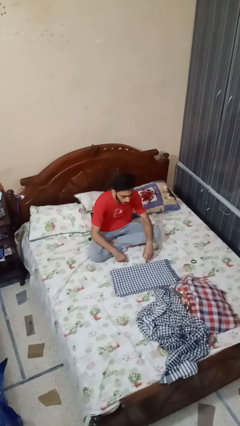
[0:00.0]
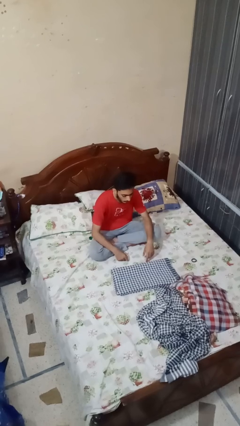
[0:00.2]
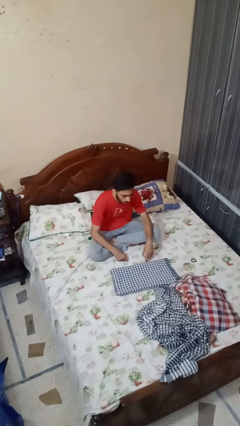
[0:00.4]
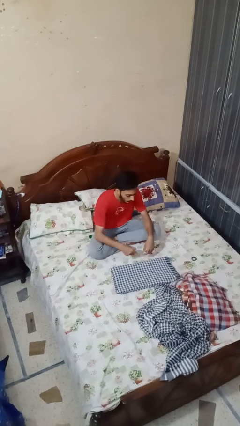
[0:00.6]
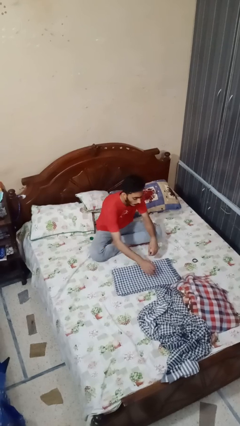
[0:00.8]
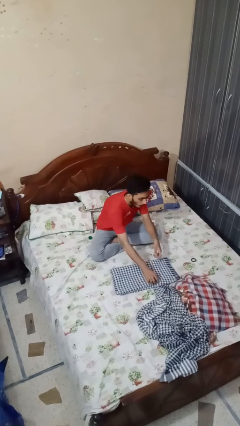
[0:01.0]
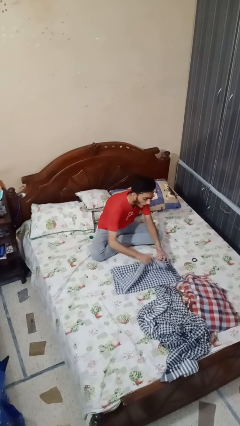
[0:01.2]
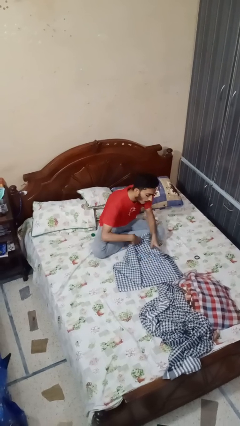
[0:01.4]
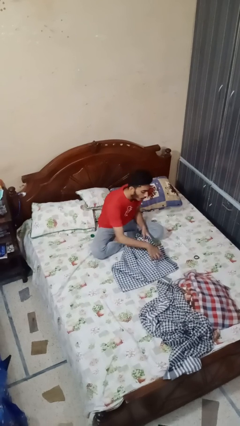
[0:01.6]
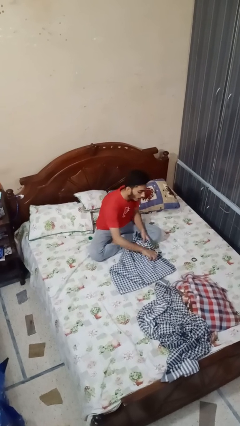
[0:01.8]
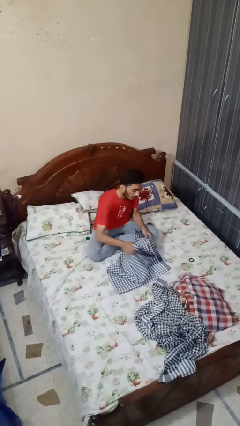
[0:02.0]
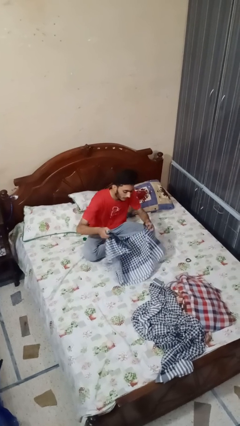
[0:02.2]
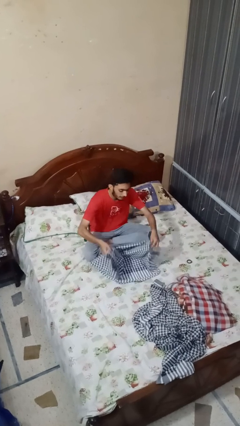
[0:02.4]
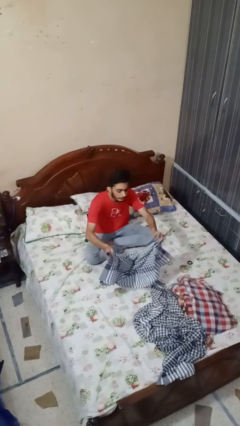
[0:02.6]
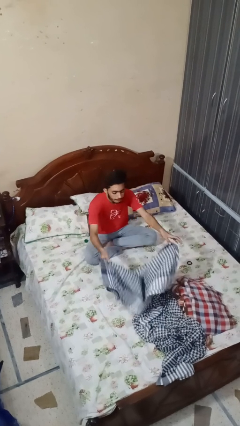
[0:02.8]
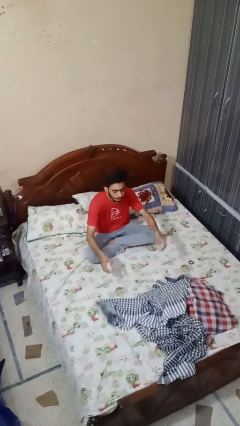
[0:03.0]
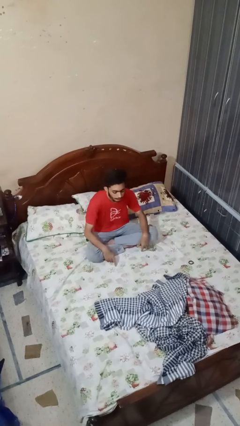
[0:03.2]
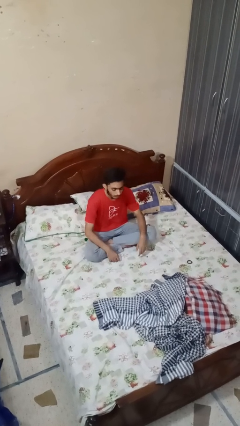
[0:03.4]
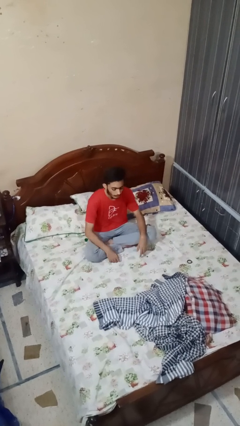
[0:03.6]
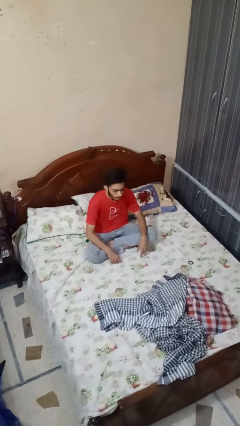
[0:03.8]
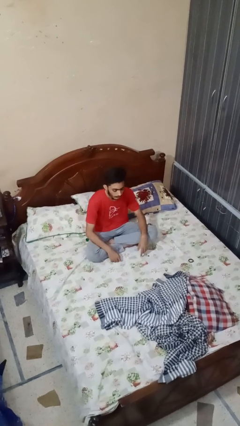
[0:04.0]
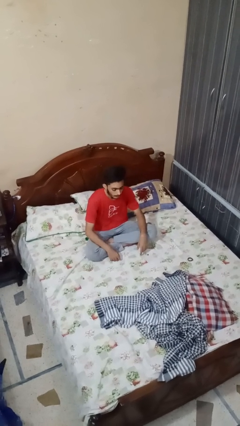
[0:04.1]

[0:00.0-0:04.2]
person unfolds blanket

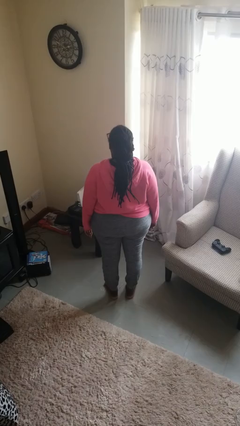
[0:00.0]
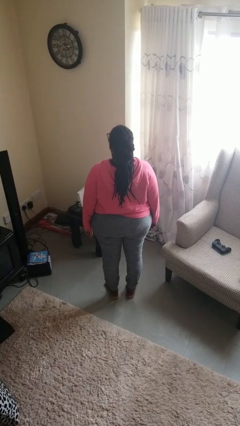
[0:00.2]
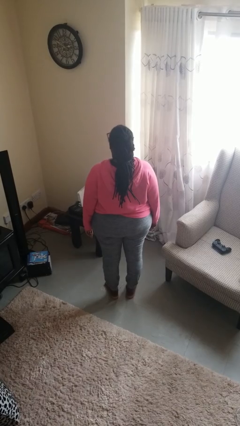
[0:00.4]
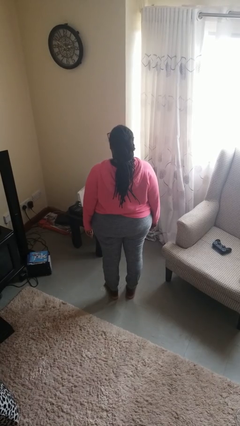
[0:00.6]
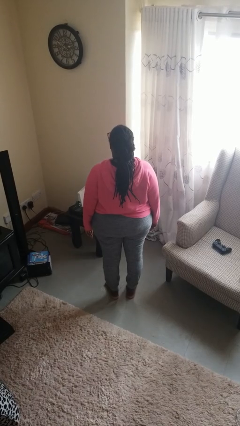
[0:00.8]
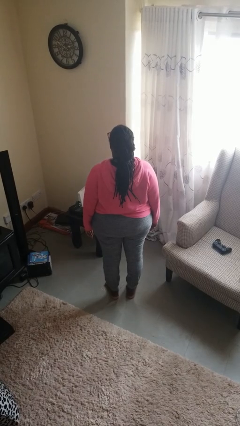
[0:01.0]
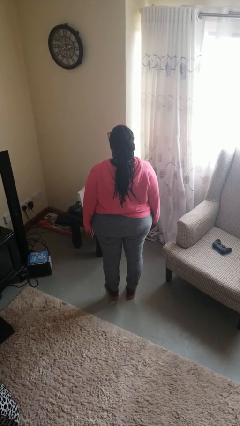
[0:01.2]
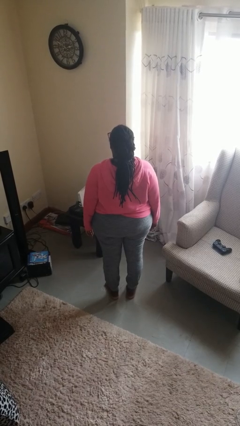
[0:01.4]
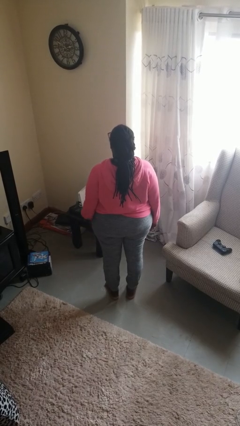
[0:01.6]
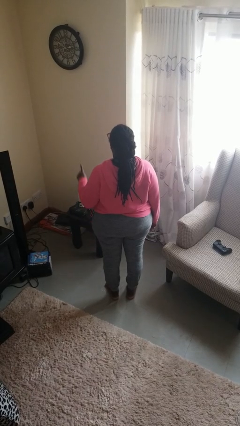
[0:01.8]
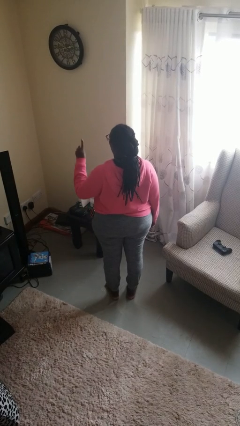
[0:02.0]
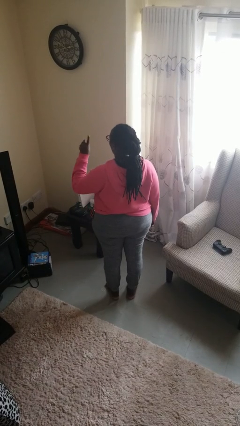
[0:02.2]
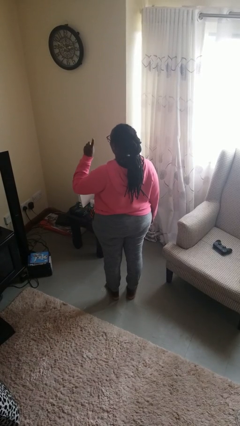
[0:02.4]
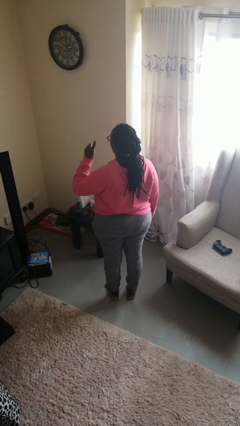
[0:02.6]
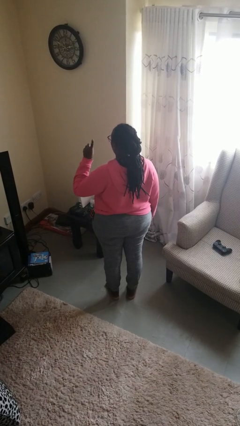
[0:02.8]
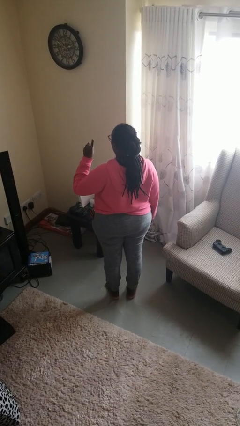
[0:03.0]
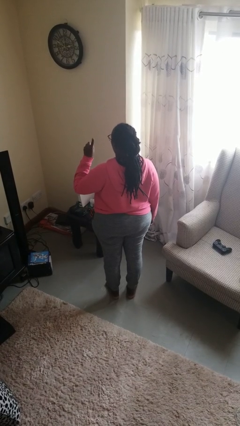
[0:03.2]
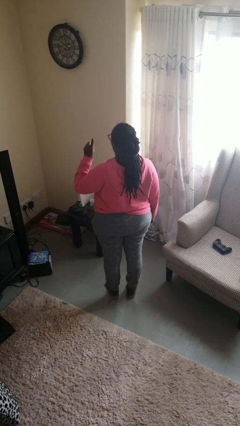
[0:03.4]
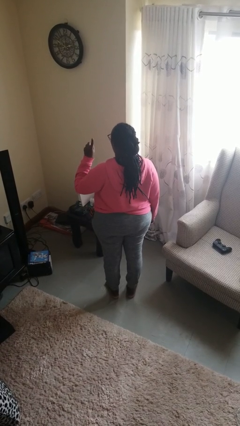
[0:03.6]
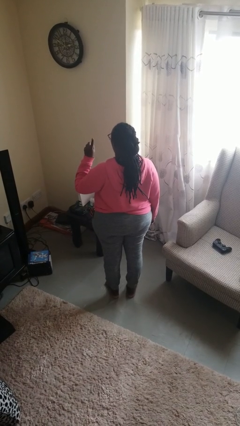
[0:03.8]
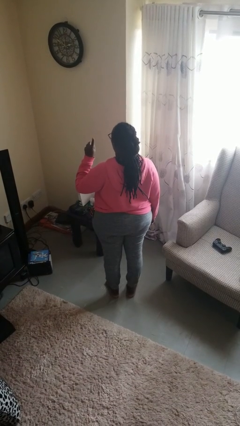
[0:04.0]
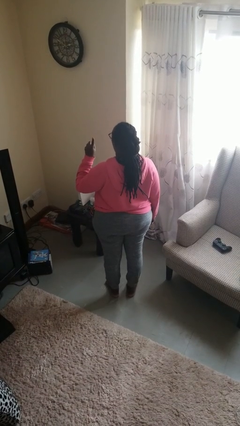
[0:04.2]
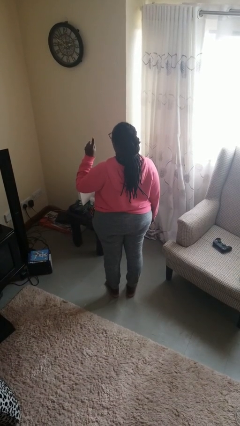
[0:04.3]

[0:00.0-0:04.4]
person gestures number one

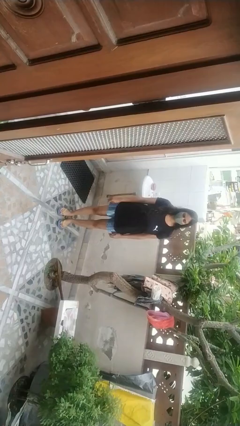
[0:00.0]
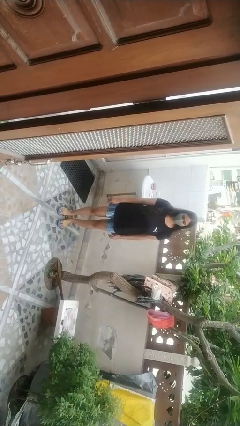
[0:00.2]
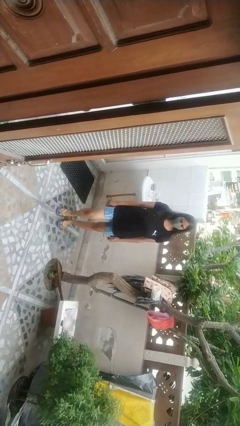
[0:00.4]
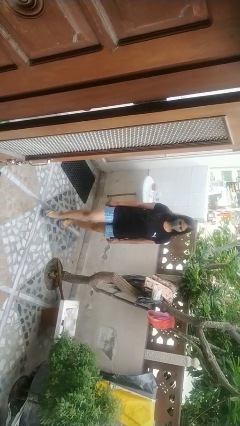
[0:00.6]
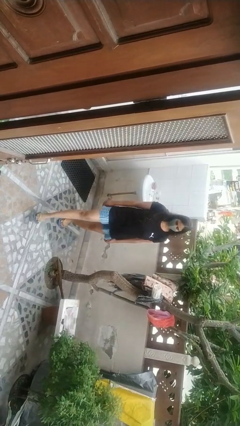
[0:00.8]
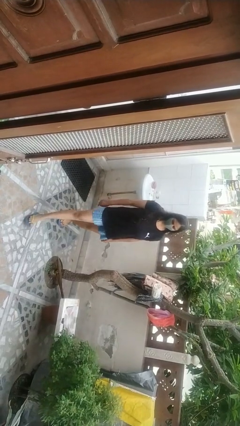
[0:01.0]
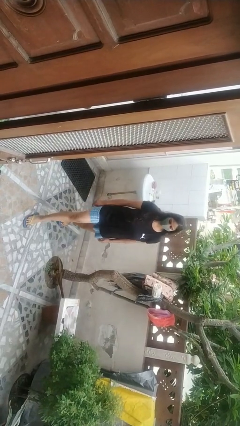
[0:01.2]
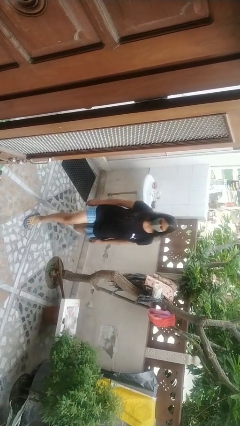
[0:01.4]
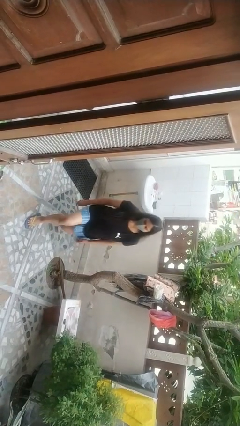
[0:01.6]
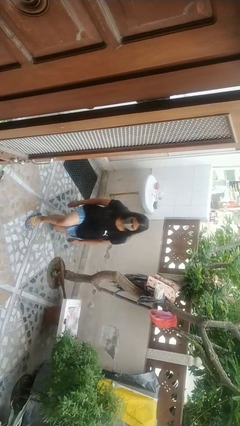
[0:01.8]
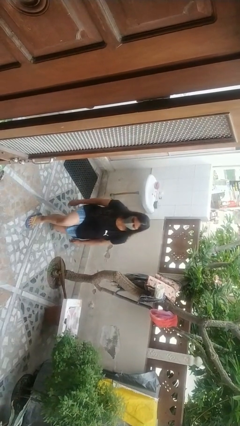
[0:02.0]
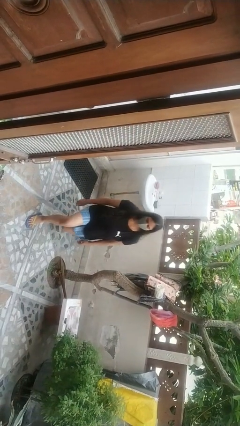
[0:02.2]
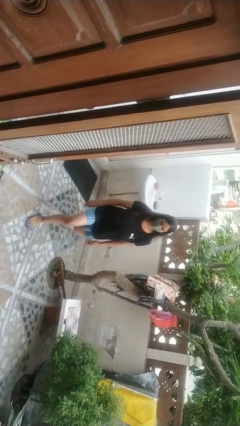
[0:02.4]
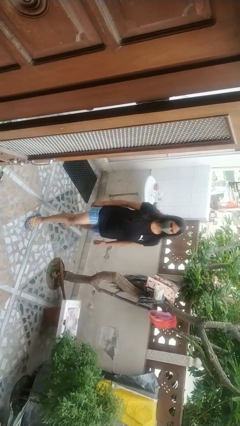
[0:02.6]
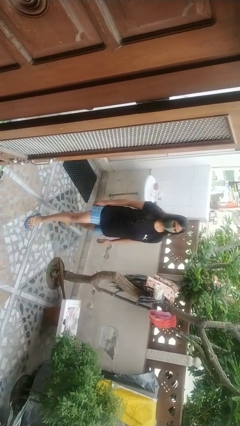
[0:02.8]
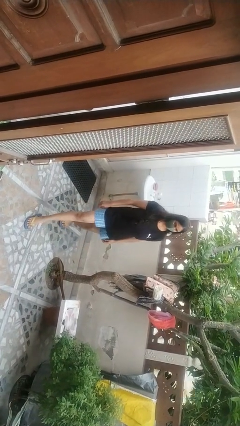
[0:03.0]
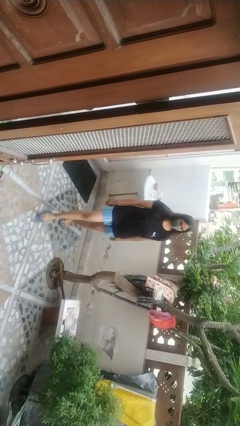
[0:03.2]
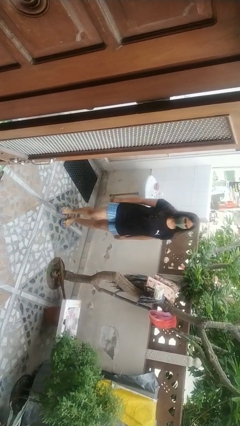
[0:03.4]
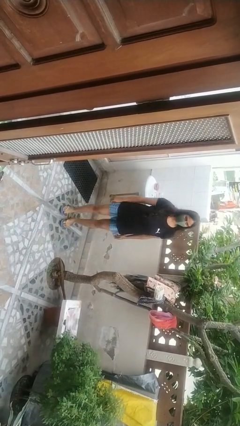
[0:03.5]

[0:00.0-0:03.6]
person exercises with lunges

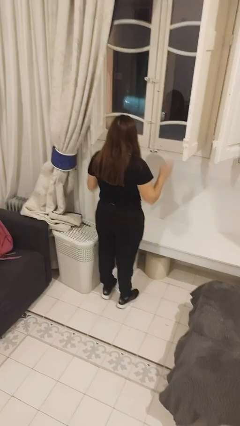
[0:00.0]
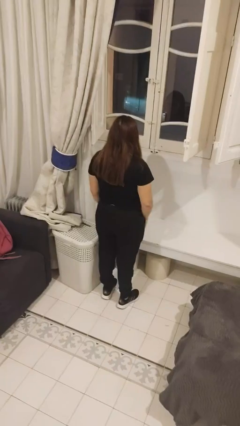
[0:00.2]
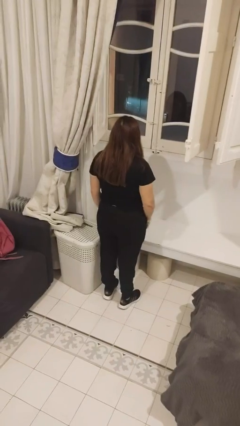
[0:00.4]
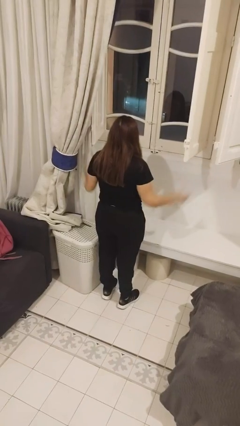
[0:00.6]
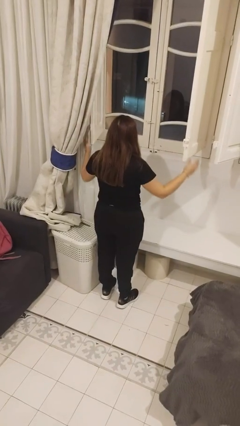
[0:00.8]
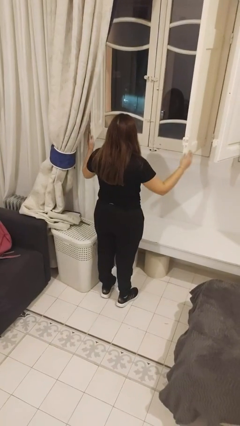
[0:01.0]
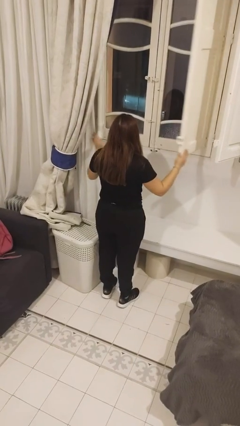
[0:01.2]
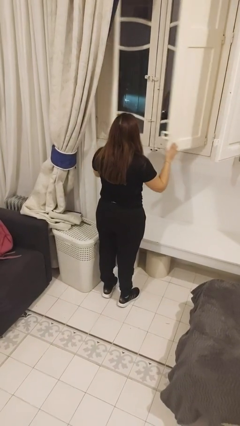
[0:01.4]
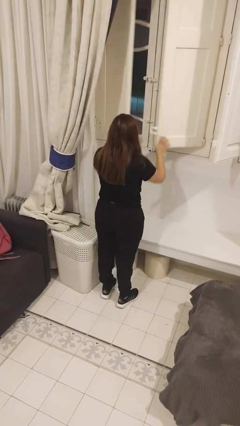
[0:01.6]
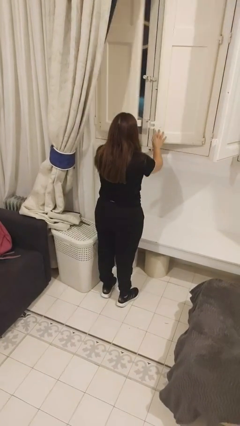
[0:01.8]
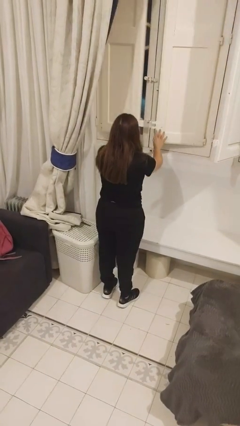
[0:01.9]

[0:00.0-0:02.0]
person closes home window

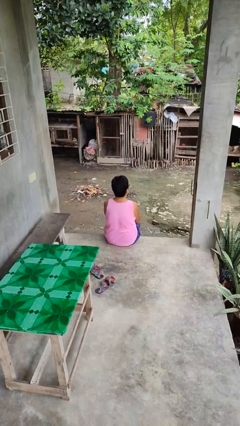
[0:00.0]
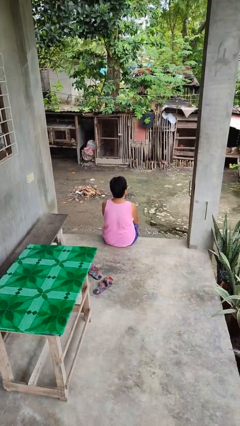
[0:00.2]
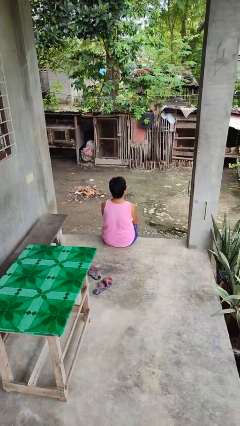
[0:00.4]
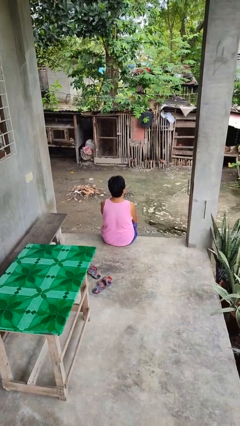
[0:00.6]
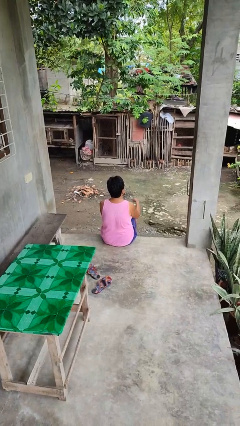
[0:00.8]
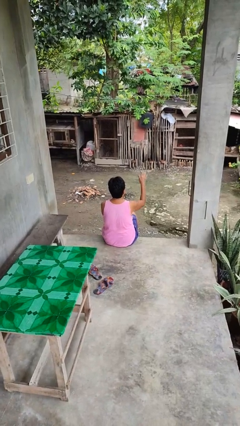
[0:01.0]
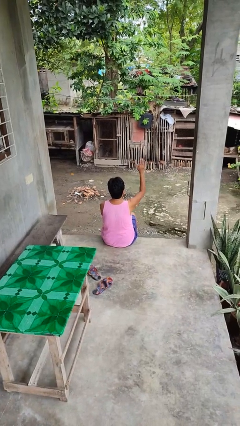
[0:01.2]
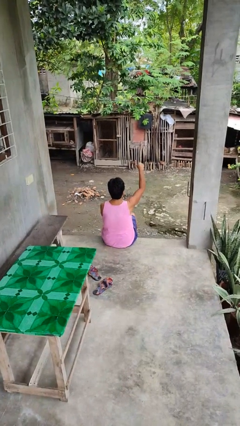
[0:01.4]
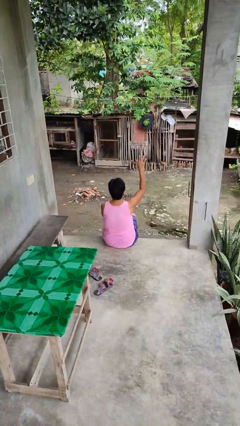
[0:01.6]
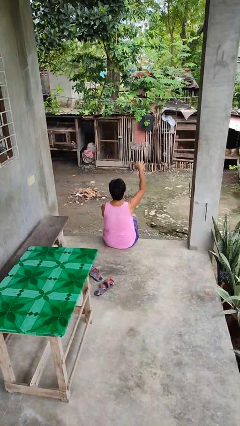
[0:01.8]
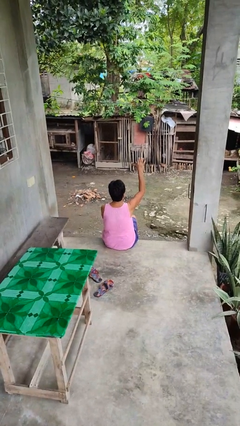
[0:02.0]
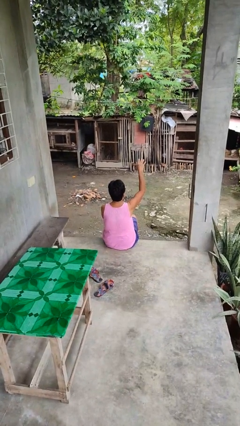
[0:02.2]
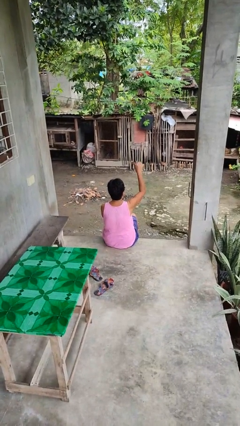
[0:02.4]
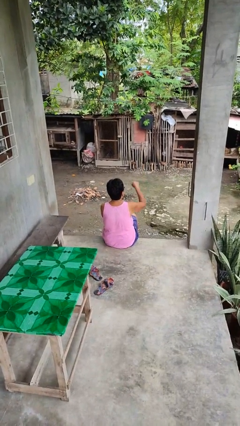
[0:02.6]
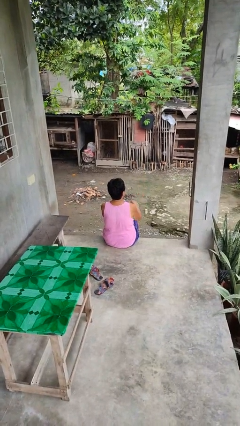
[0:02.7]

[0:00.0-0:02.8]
person gestures come here

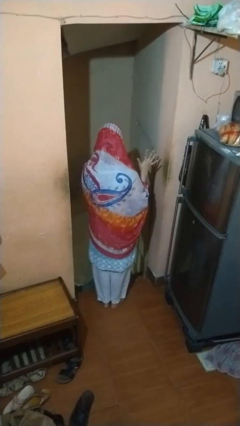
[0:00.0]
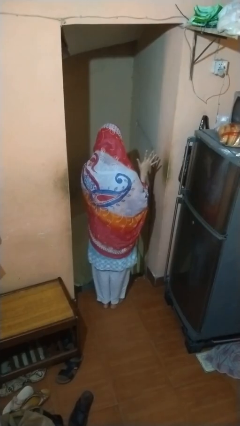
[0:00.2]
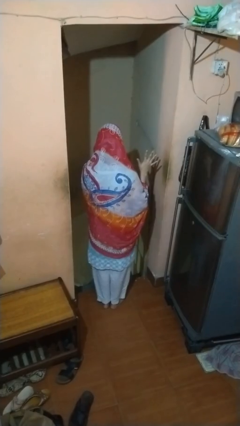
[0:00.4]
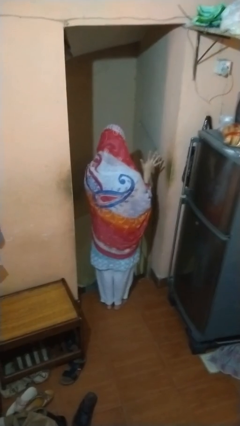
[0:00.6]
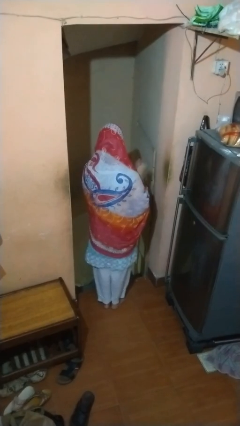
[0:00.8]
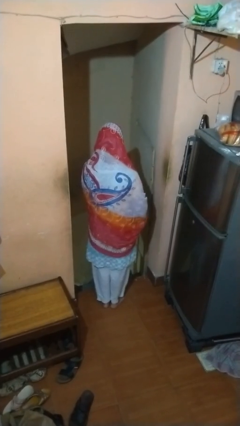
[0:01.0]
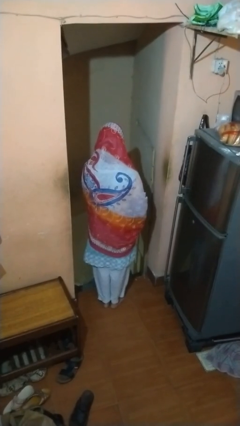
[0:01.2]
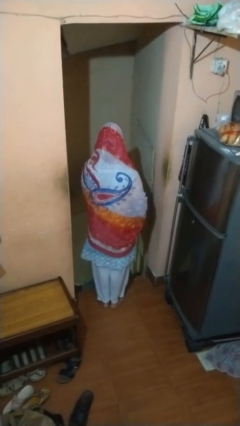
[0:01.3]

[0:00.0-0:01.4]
person gestures number five
